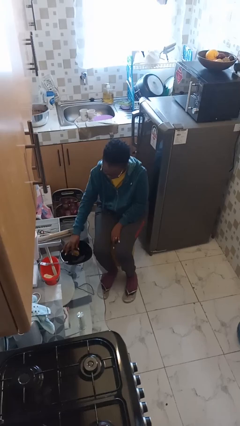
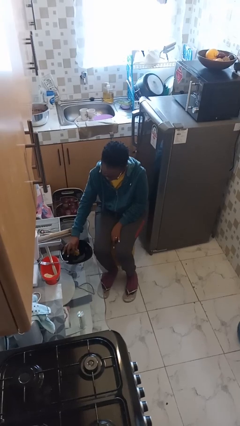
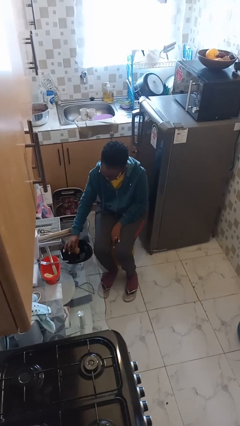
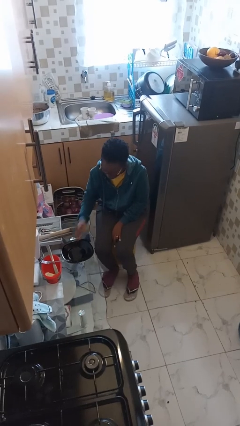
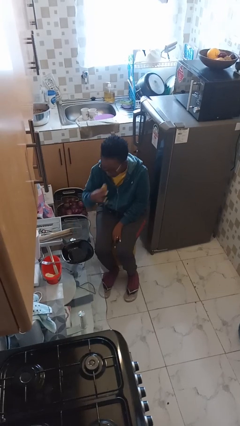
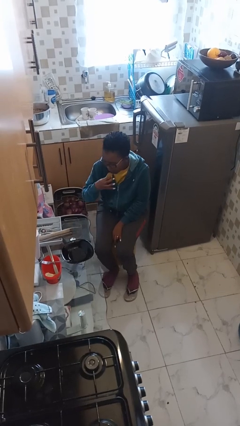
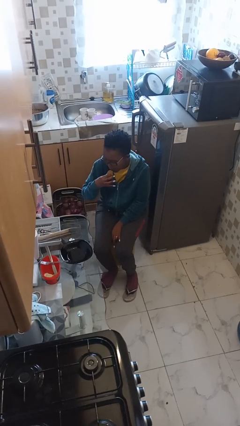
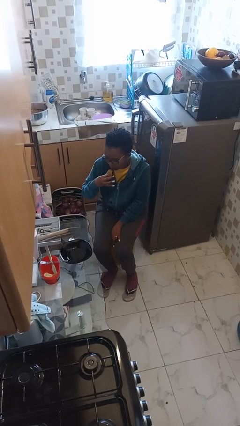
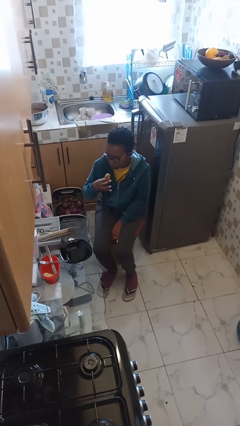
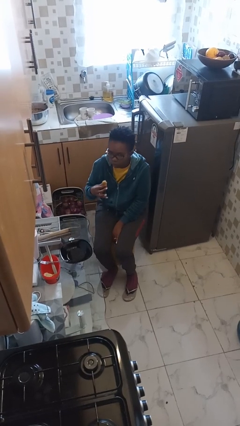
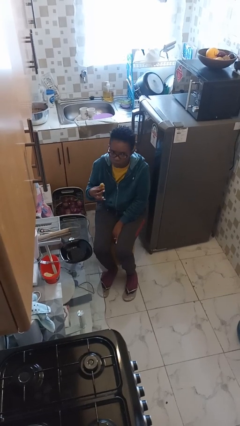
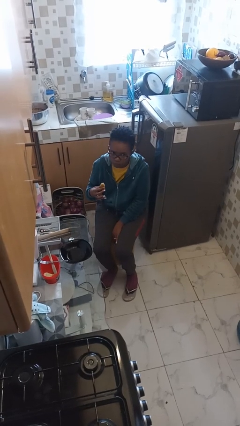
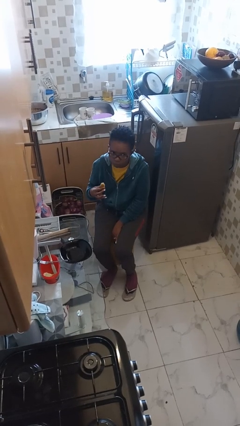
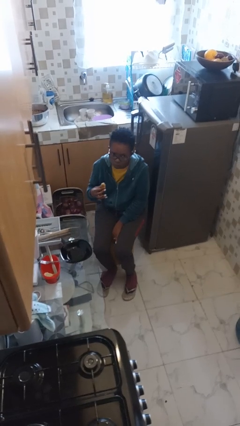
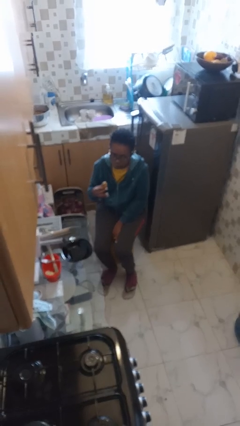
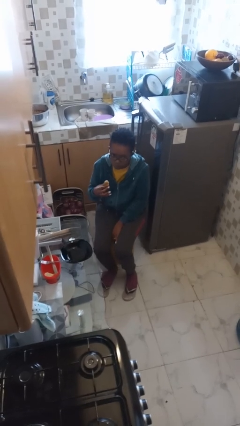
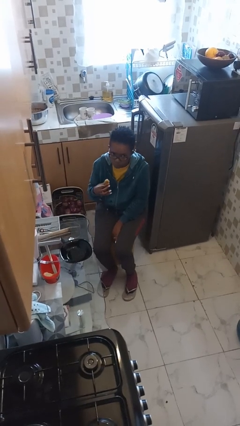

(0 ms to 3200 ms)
person eats with hands

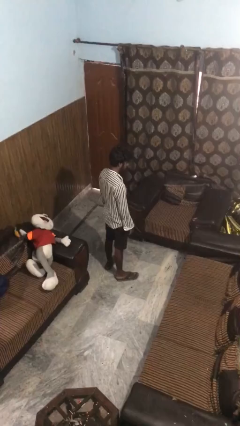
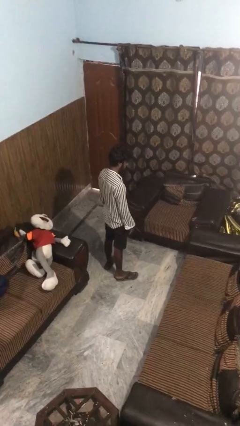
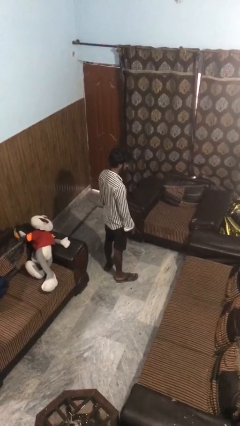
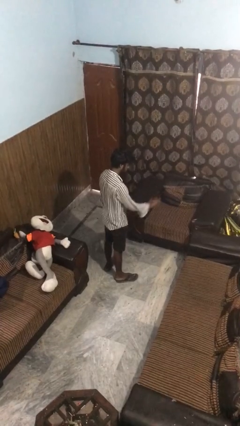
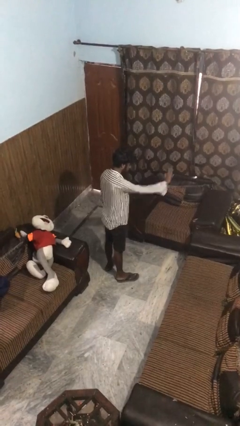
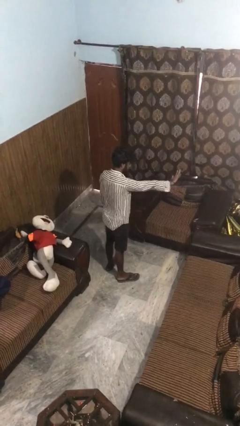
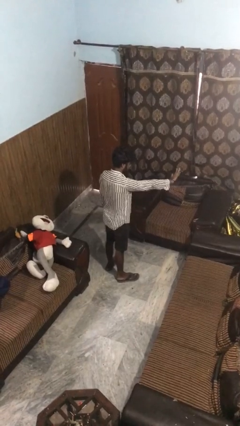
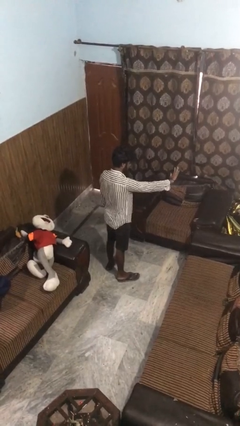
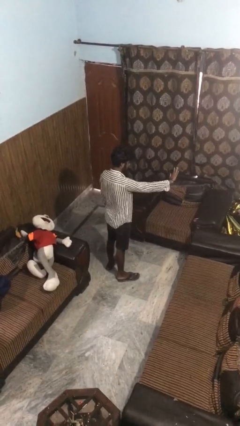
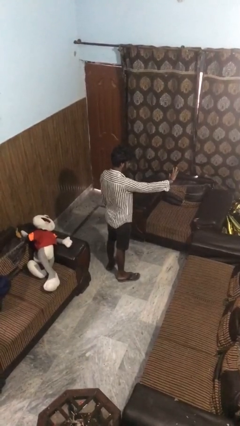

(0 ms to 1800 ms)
person gestures stop

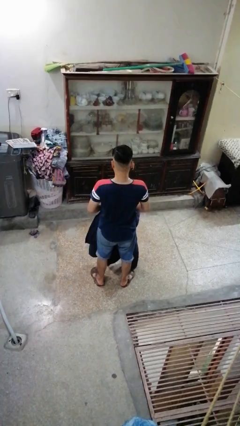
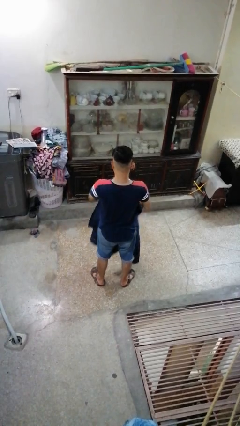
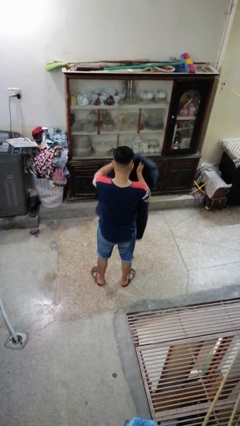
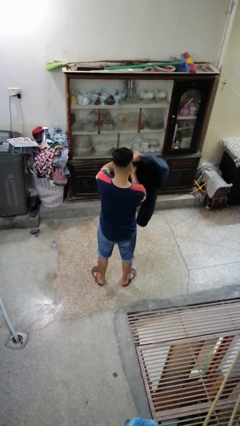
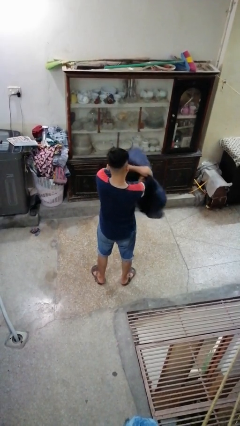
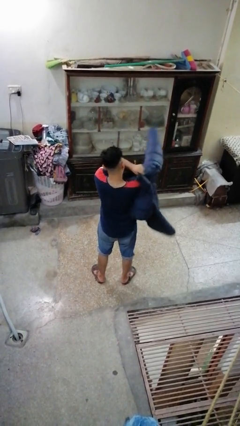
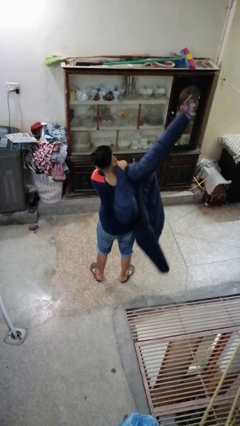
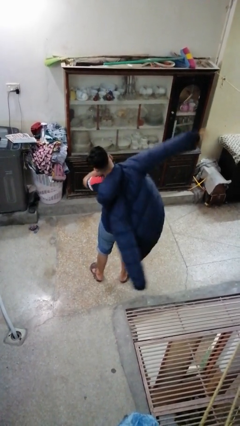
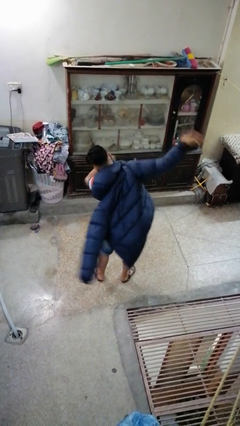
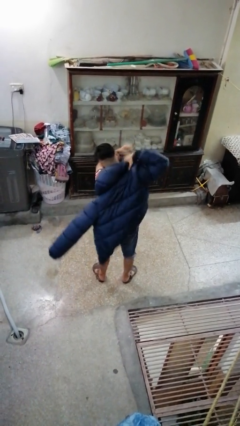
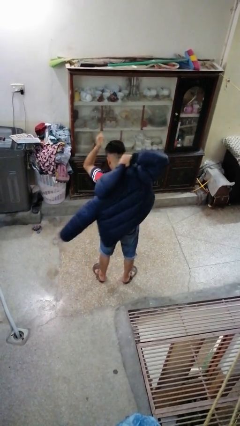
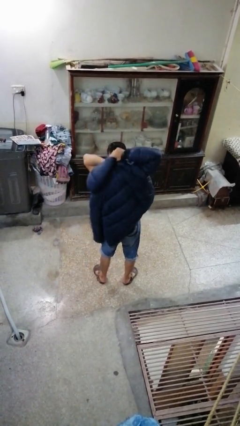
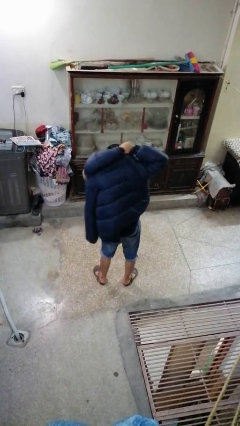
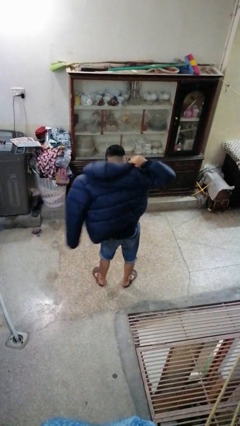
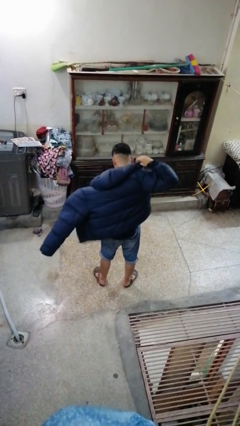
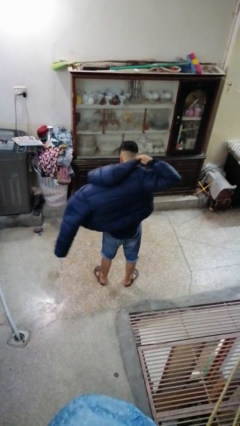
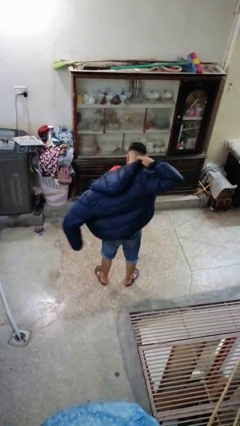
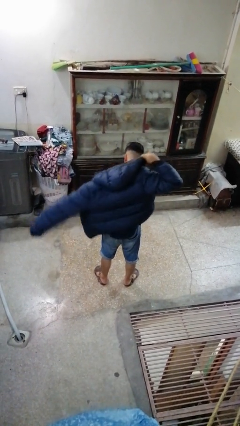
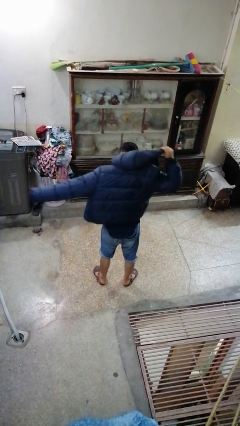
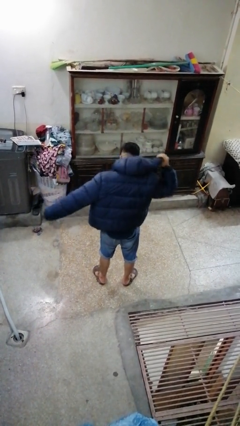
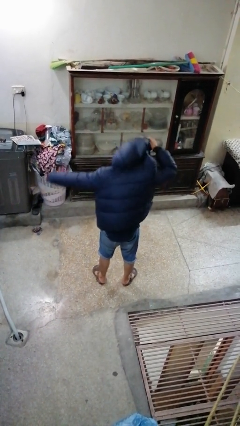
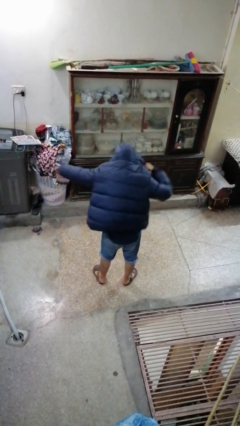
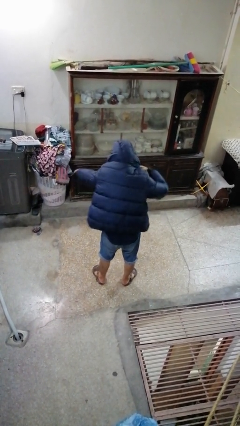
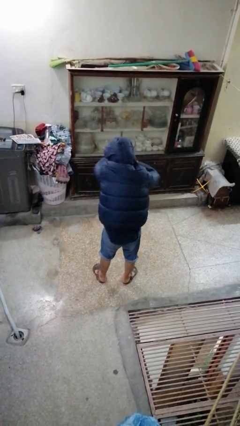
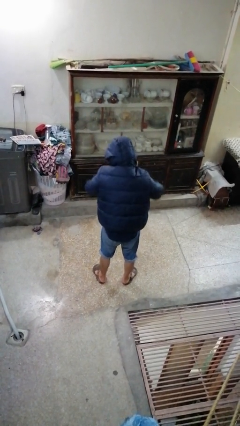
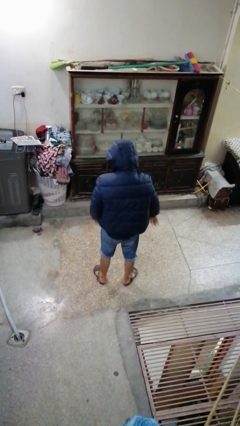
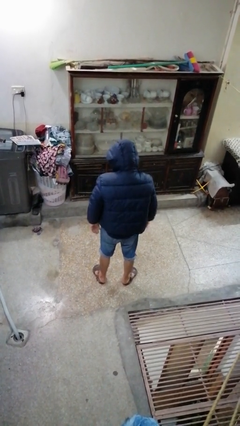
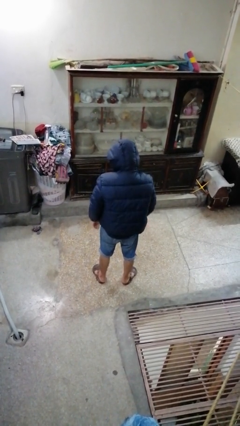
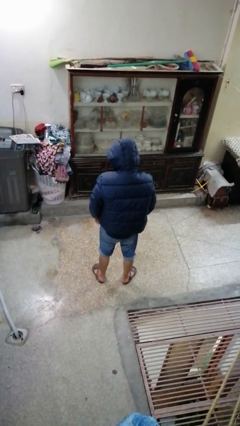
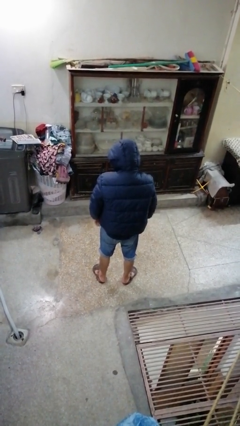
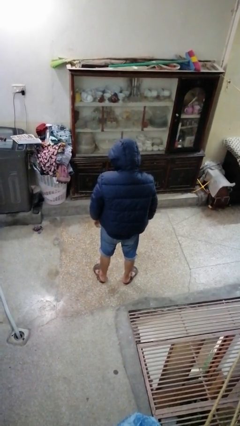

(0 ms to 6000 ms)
person puts on hoodie

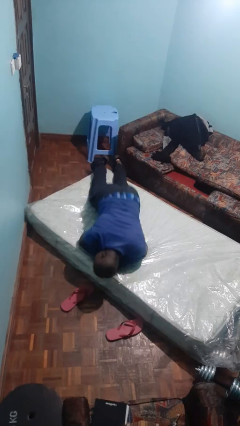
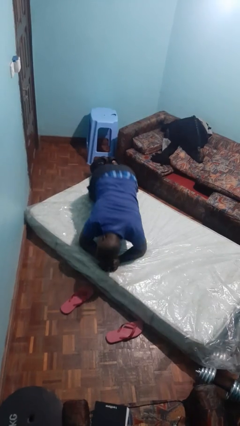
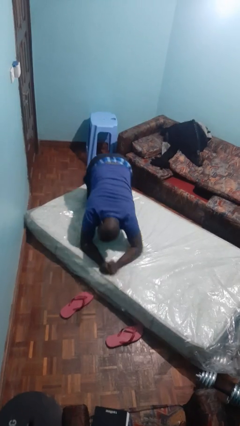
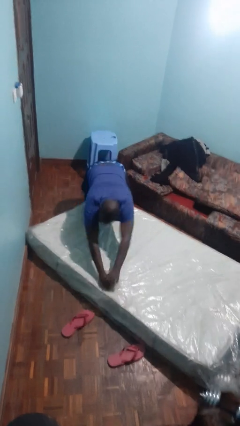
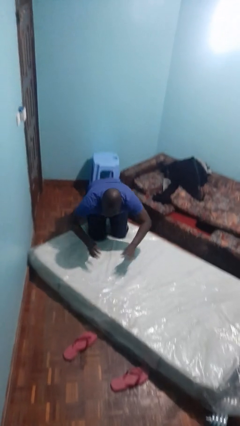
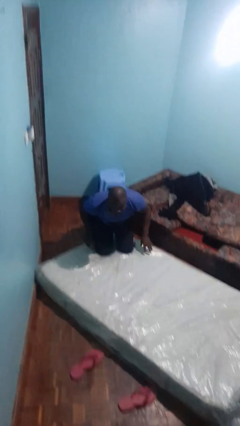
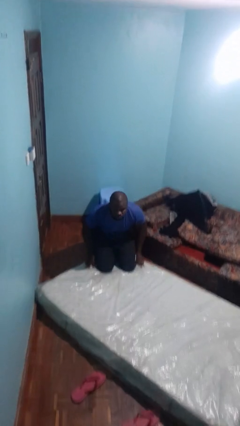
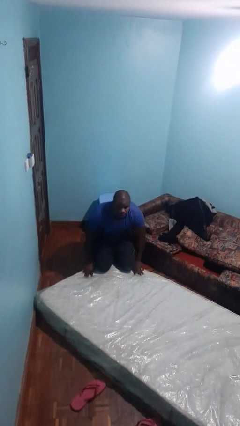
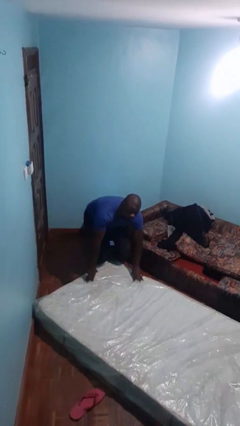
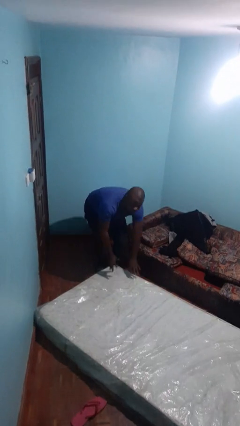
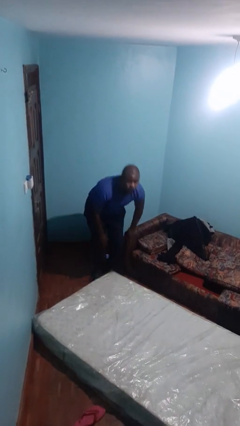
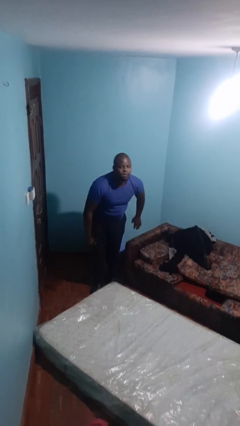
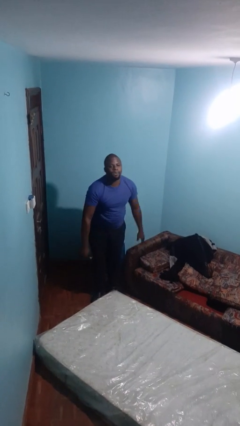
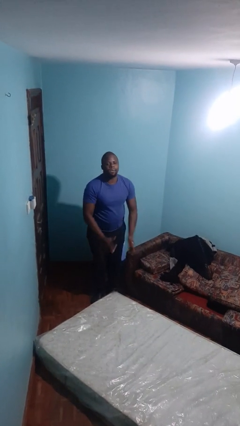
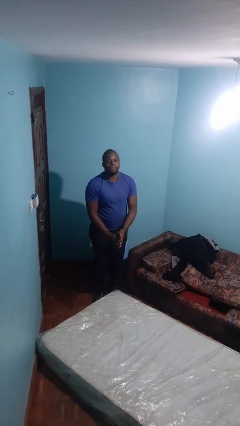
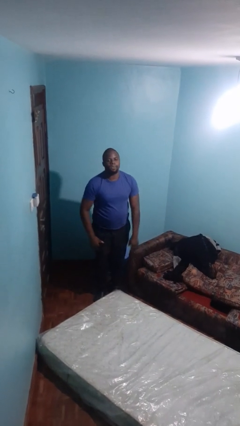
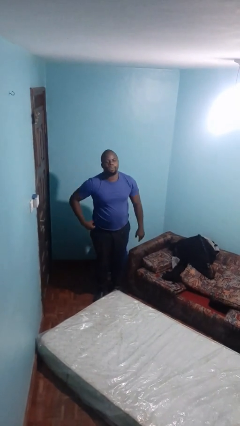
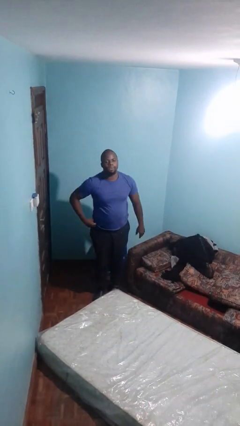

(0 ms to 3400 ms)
person stands up

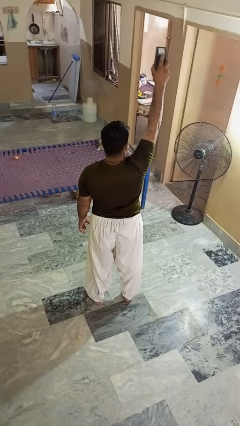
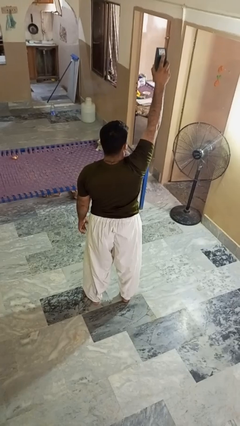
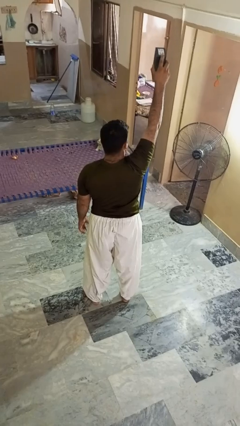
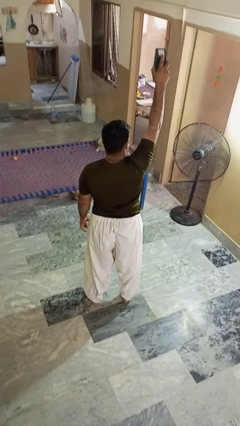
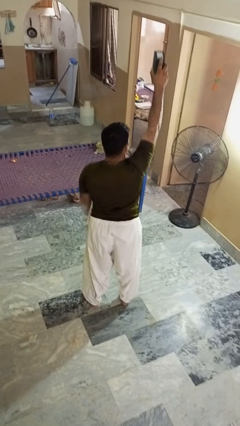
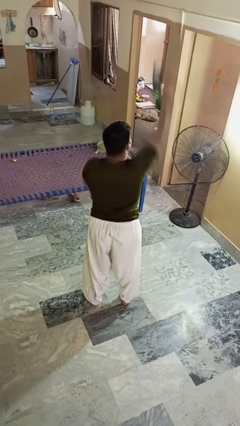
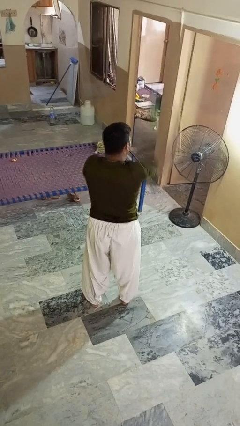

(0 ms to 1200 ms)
person drops object

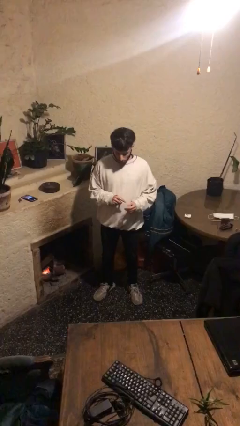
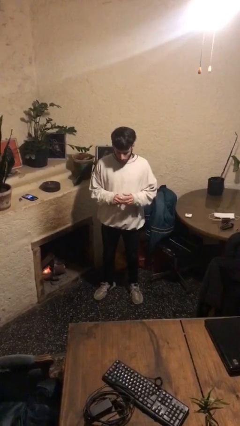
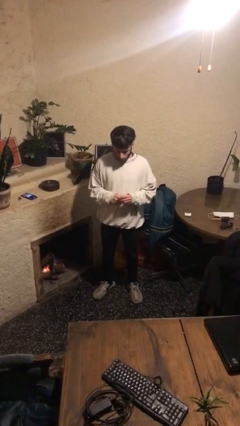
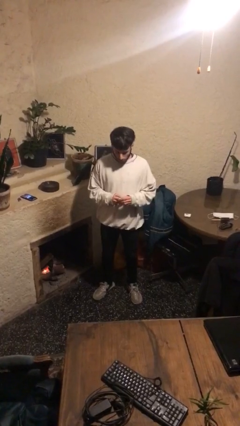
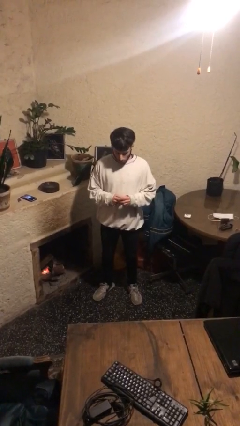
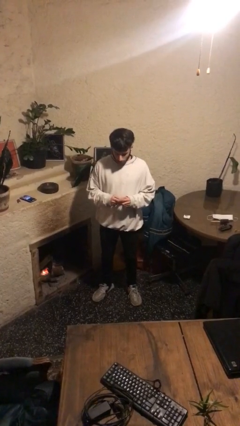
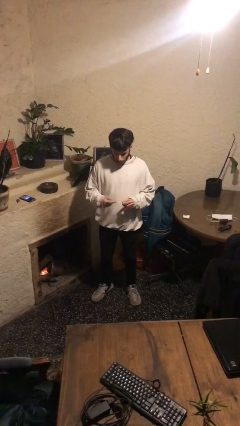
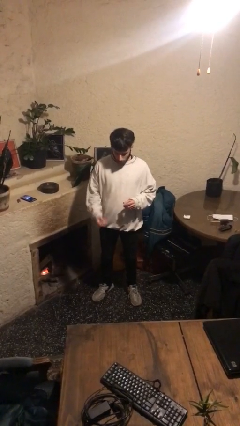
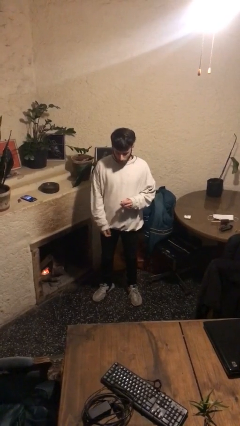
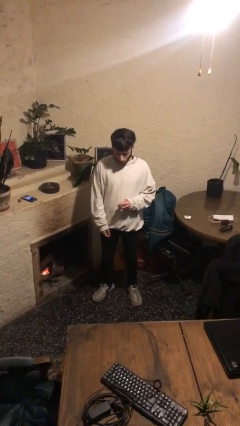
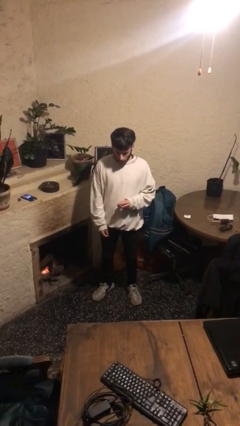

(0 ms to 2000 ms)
person takes off ring
